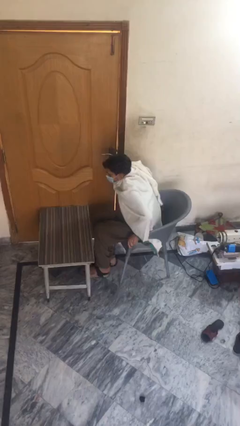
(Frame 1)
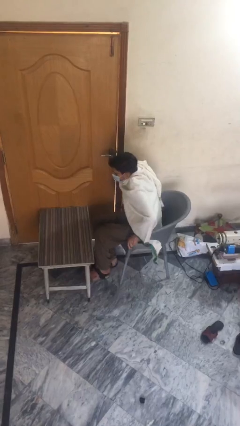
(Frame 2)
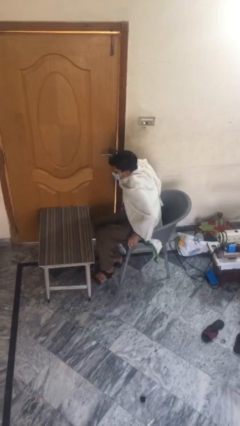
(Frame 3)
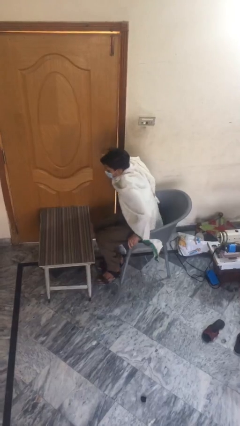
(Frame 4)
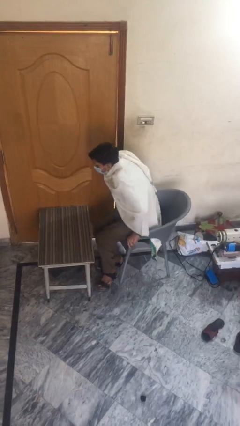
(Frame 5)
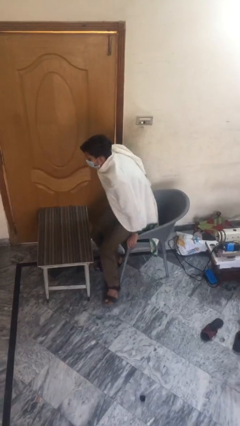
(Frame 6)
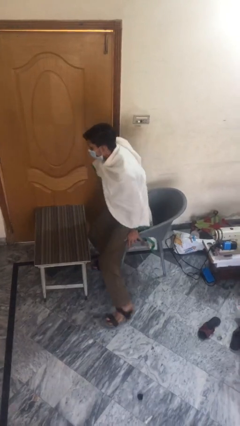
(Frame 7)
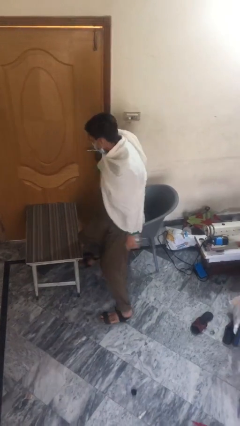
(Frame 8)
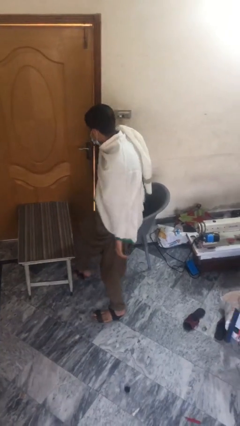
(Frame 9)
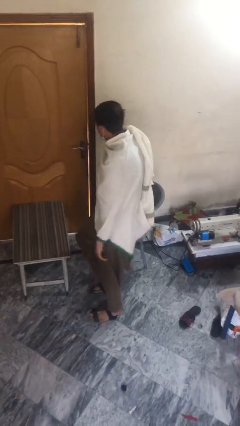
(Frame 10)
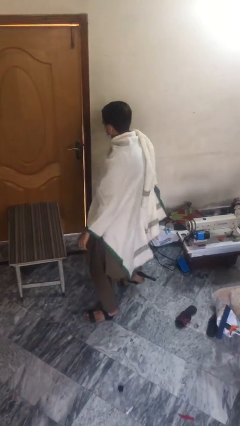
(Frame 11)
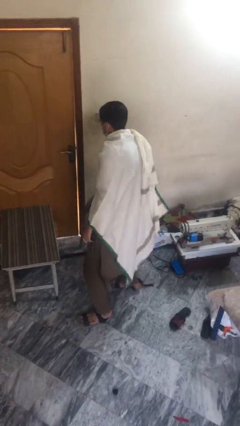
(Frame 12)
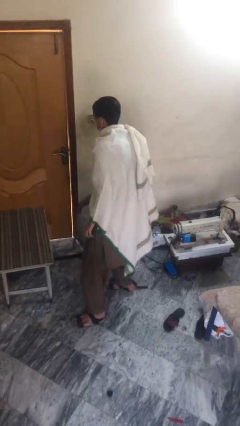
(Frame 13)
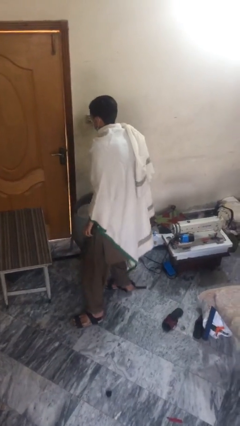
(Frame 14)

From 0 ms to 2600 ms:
person stands up

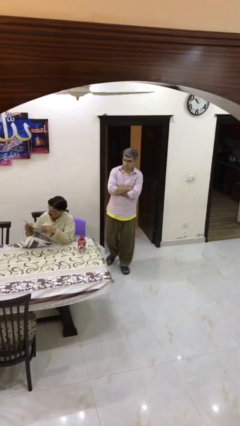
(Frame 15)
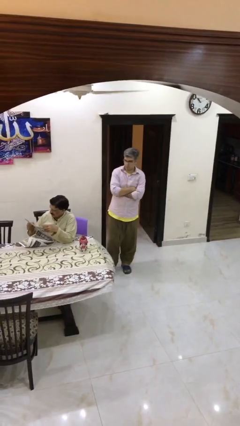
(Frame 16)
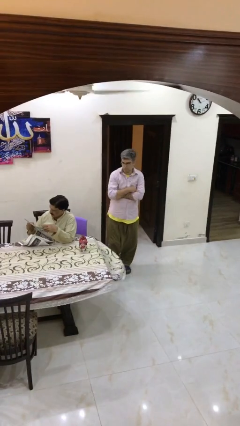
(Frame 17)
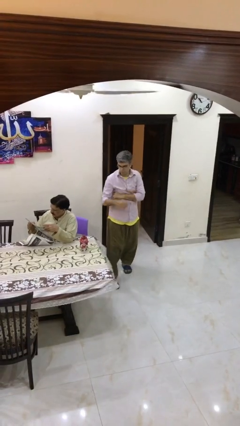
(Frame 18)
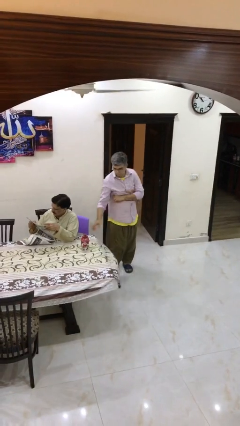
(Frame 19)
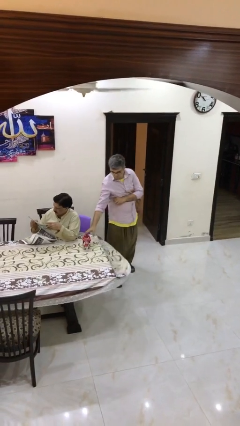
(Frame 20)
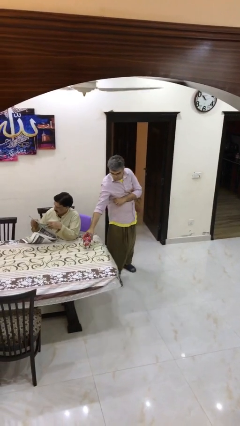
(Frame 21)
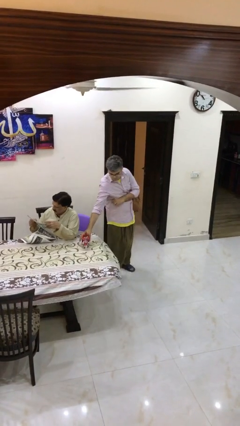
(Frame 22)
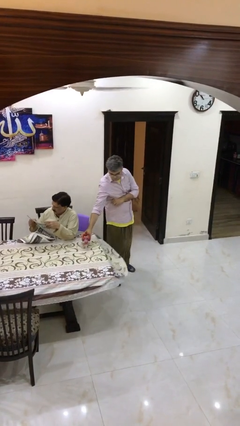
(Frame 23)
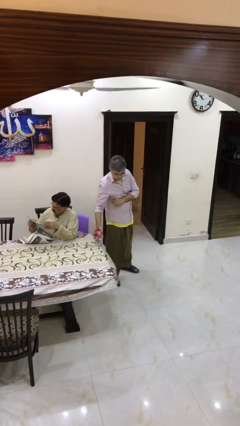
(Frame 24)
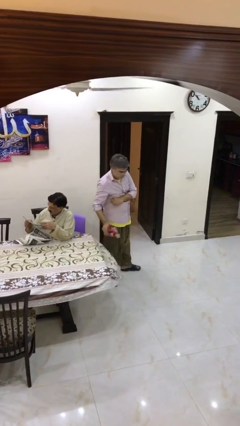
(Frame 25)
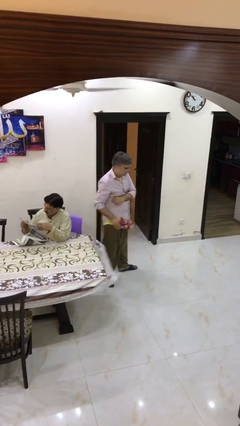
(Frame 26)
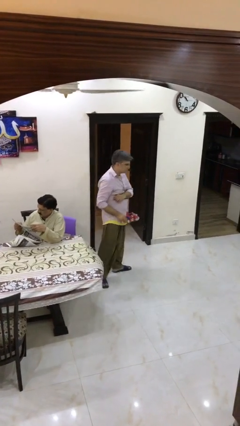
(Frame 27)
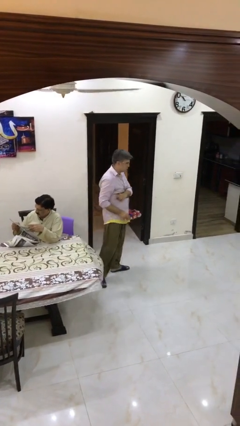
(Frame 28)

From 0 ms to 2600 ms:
person steals object from person

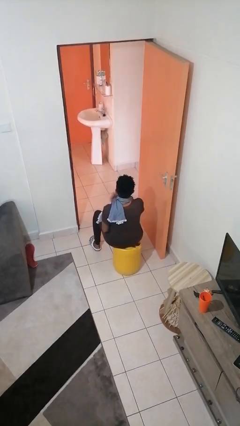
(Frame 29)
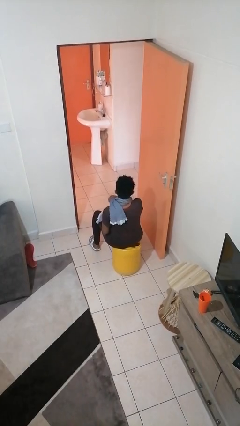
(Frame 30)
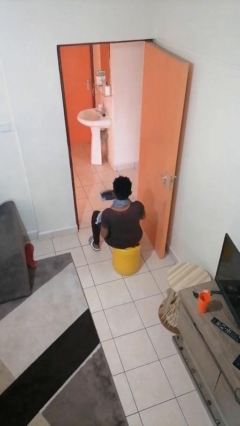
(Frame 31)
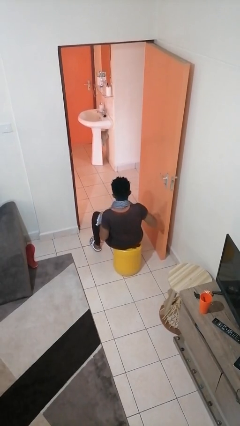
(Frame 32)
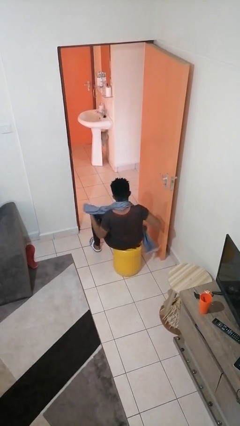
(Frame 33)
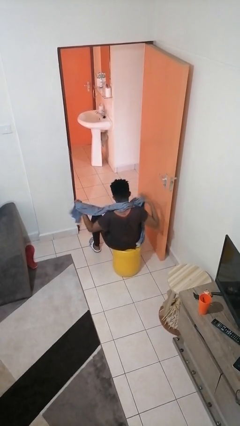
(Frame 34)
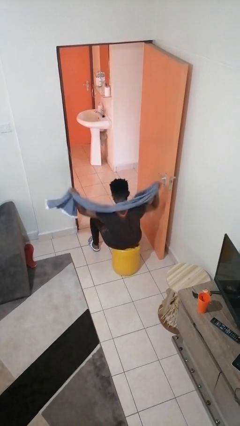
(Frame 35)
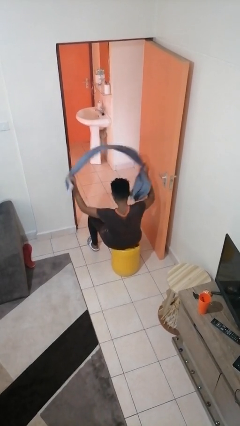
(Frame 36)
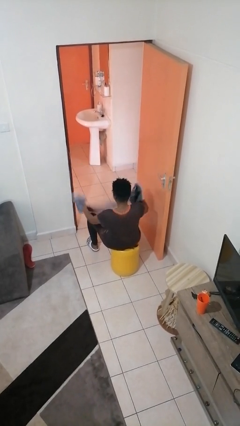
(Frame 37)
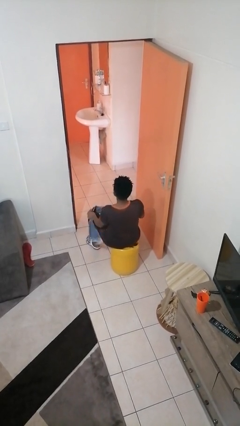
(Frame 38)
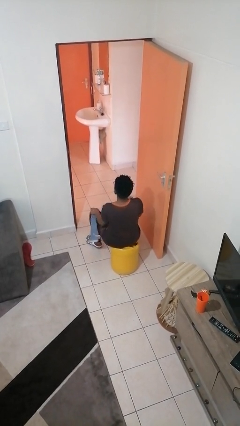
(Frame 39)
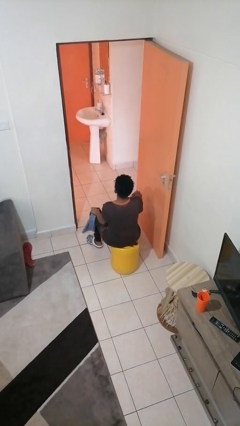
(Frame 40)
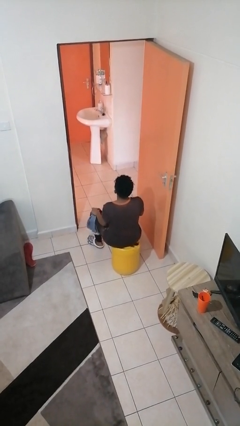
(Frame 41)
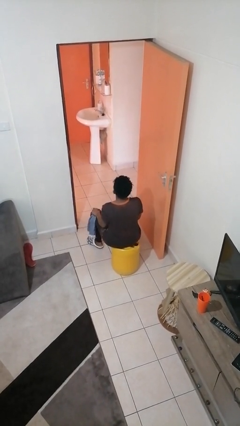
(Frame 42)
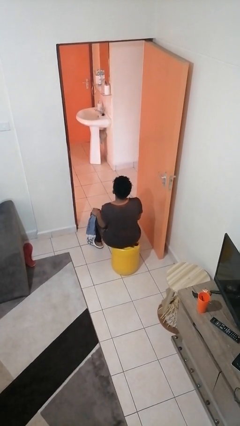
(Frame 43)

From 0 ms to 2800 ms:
person takes off scarf

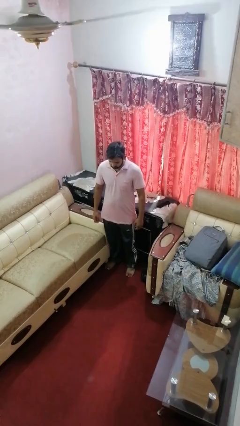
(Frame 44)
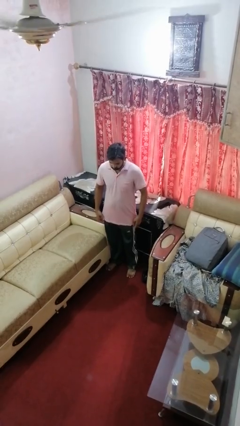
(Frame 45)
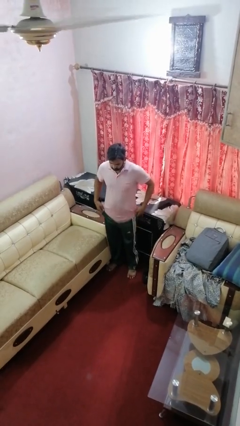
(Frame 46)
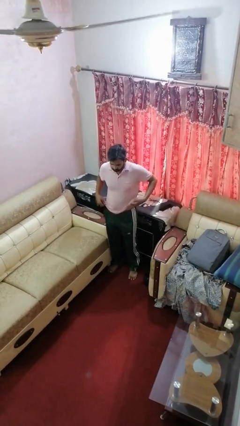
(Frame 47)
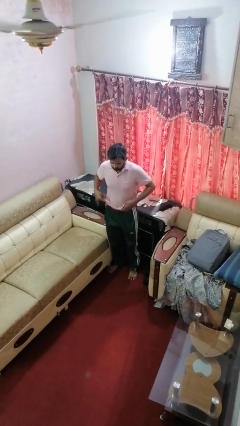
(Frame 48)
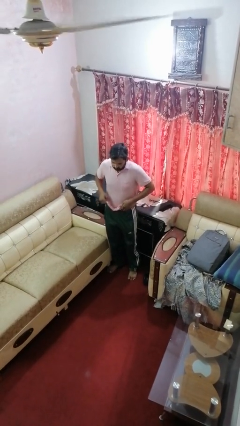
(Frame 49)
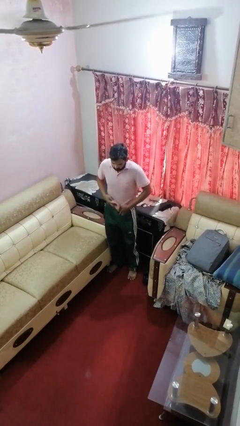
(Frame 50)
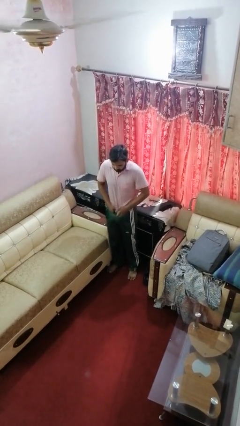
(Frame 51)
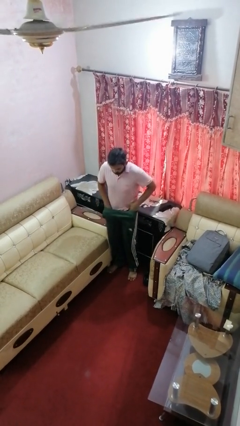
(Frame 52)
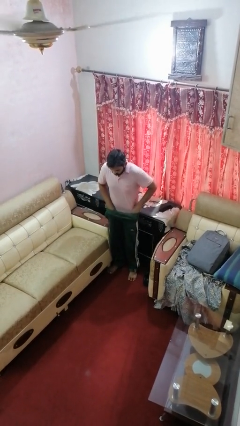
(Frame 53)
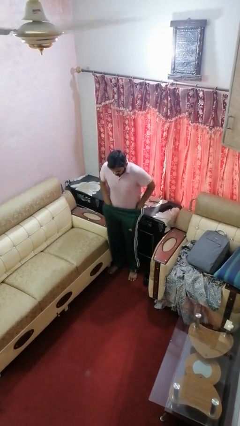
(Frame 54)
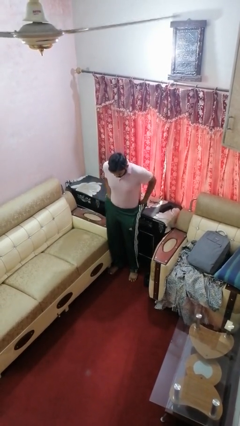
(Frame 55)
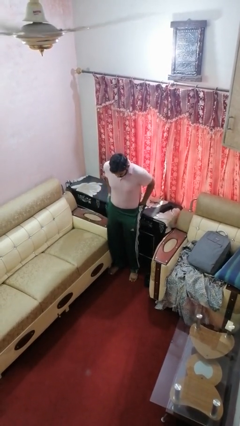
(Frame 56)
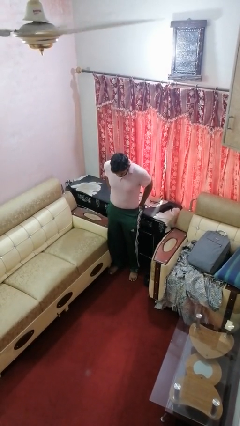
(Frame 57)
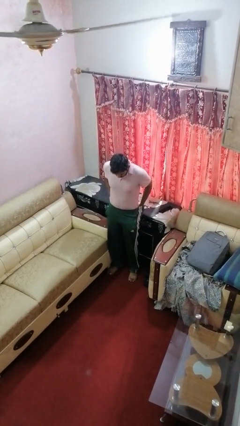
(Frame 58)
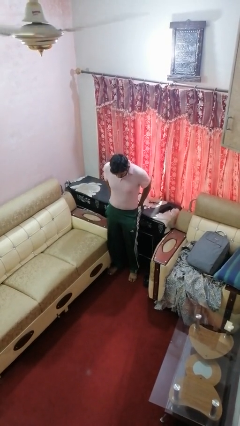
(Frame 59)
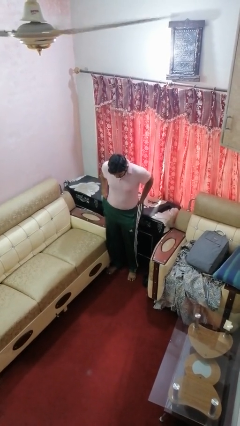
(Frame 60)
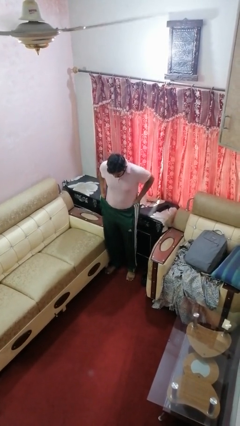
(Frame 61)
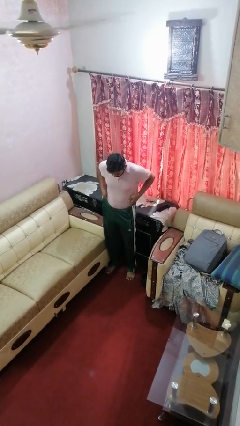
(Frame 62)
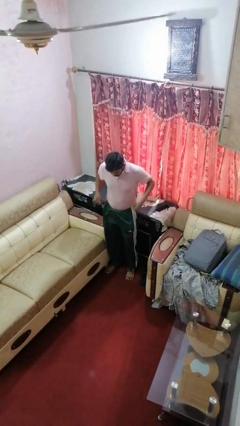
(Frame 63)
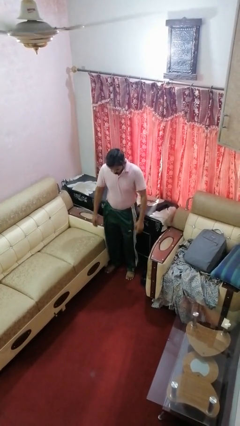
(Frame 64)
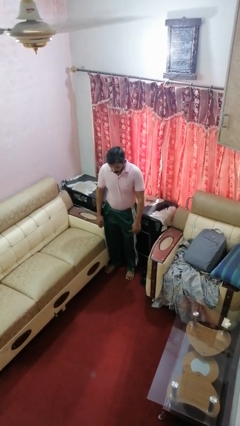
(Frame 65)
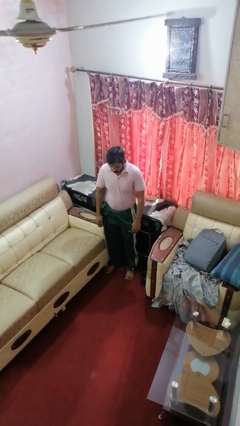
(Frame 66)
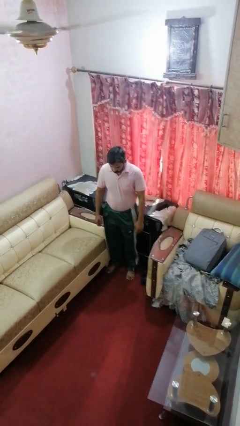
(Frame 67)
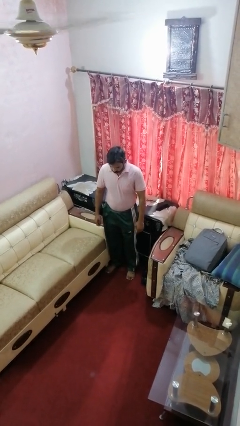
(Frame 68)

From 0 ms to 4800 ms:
person tucks in shirt

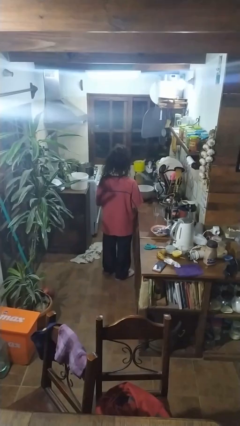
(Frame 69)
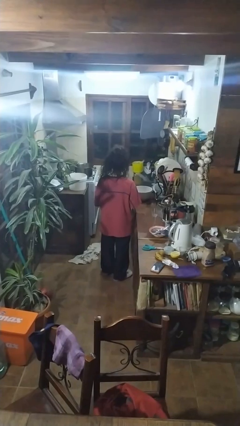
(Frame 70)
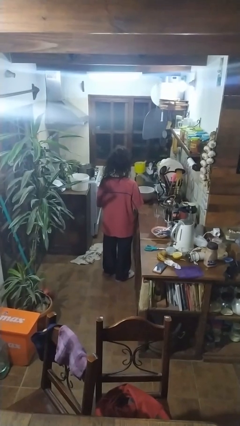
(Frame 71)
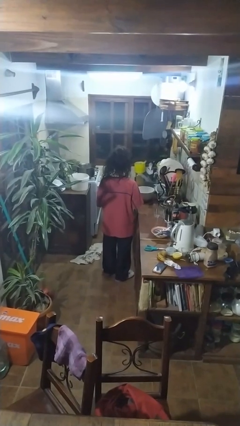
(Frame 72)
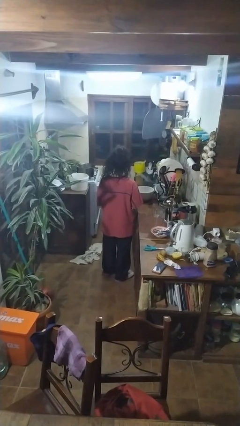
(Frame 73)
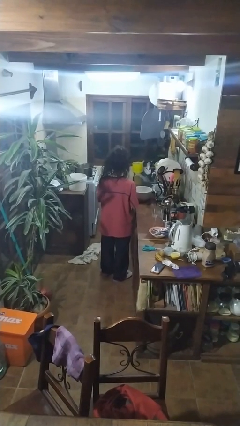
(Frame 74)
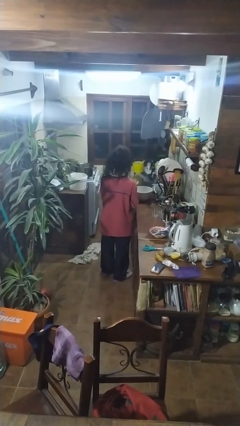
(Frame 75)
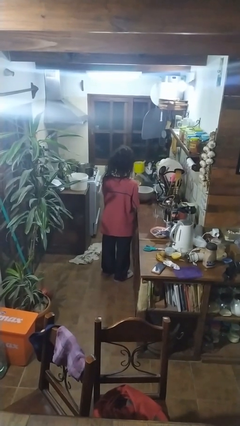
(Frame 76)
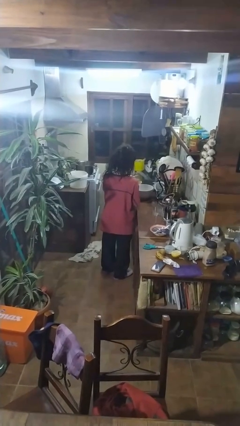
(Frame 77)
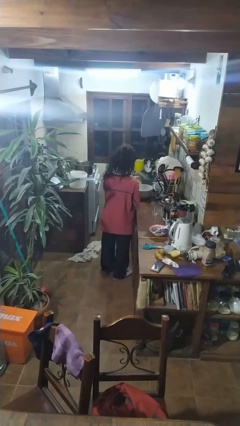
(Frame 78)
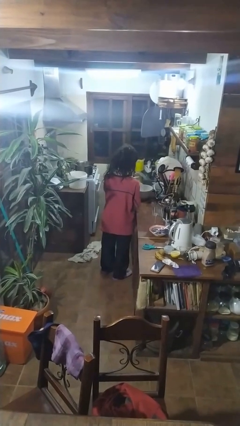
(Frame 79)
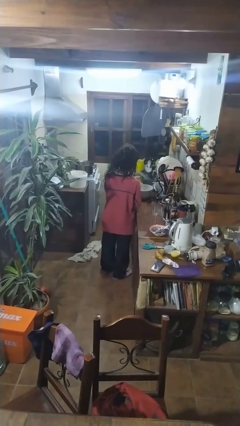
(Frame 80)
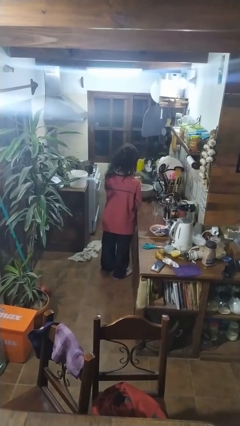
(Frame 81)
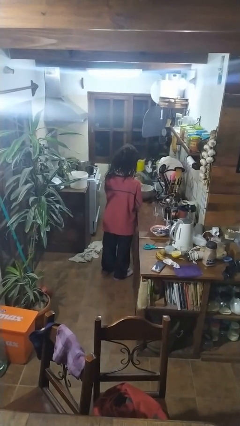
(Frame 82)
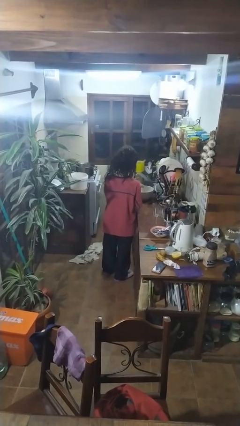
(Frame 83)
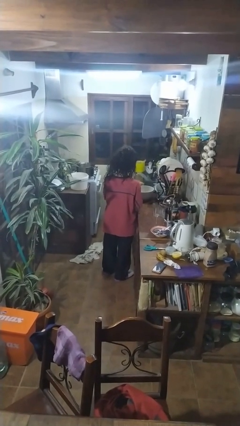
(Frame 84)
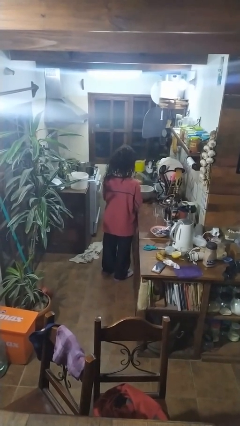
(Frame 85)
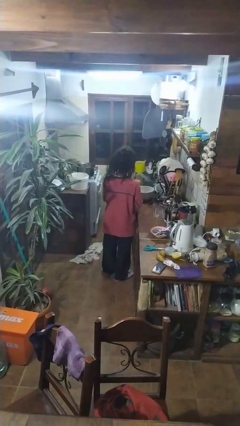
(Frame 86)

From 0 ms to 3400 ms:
person pours into bowl

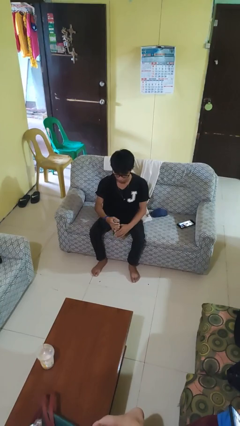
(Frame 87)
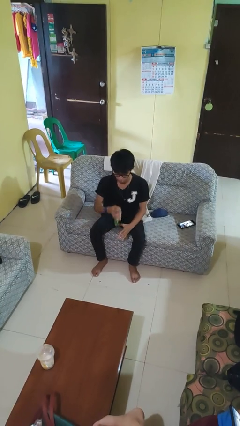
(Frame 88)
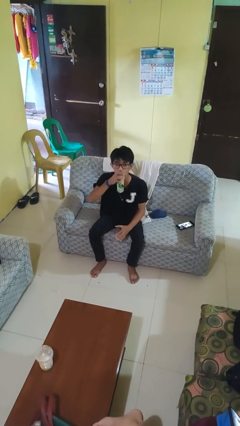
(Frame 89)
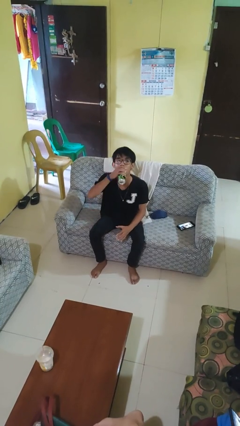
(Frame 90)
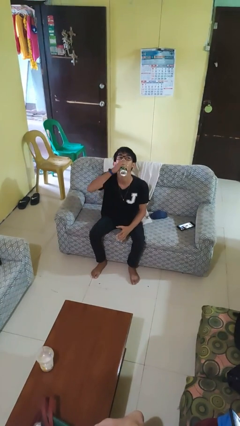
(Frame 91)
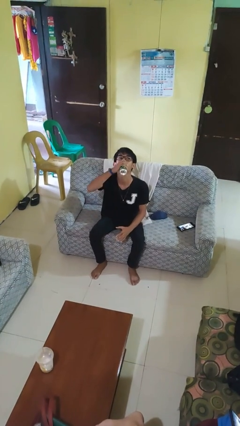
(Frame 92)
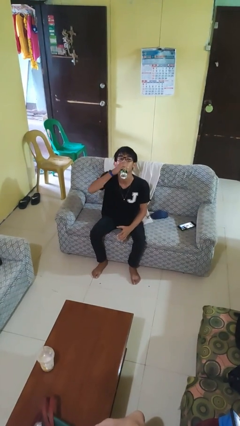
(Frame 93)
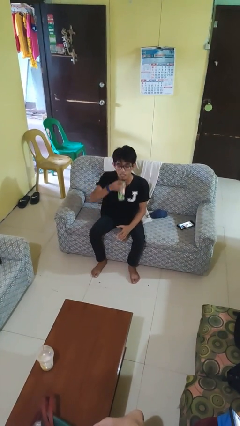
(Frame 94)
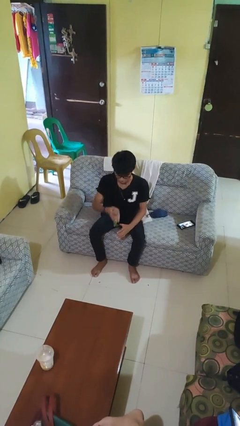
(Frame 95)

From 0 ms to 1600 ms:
person drinks from beverage can
